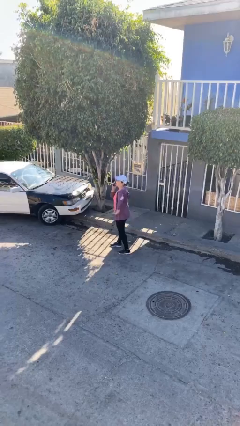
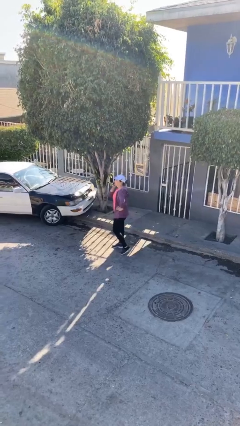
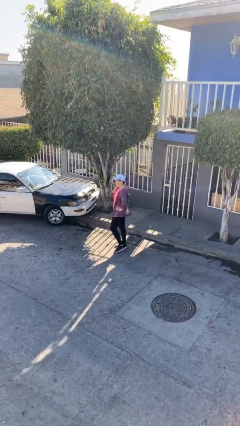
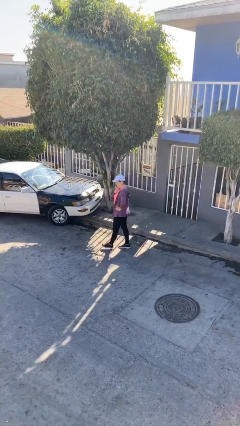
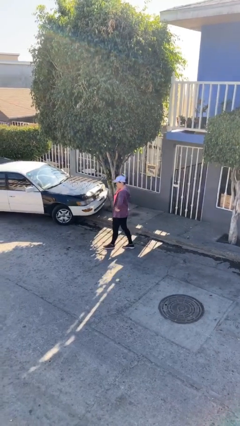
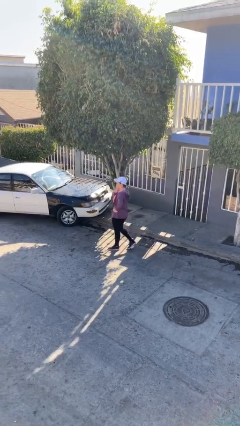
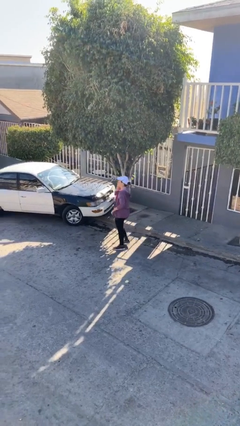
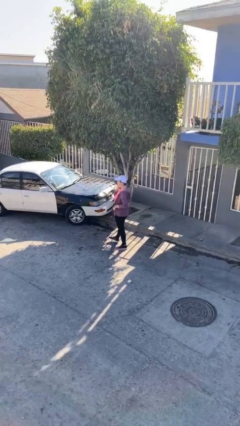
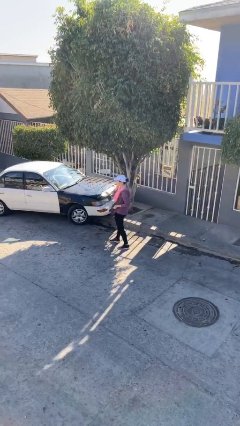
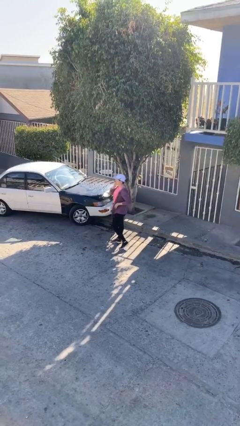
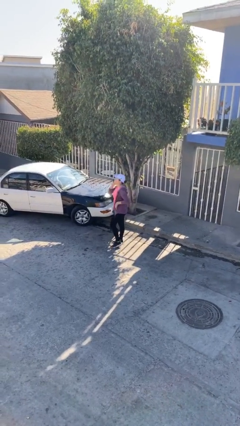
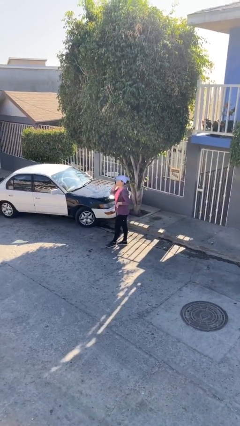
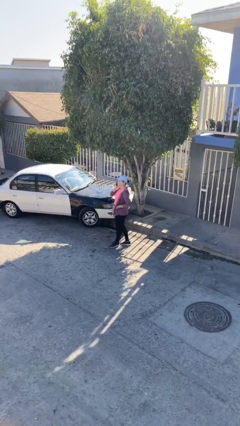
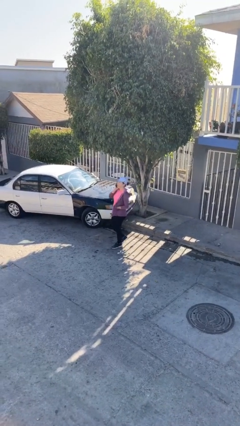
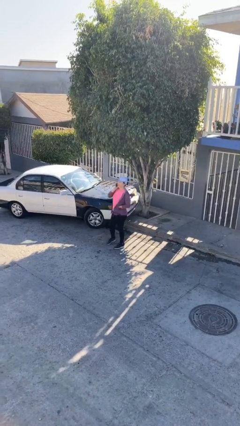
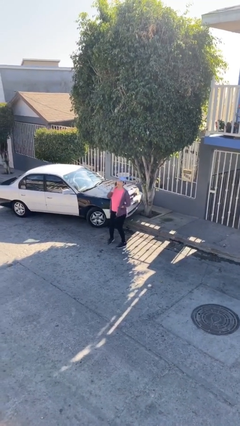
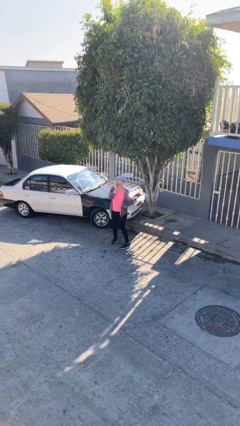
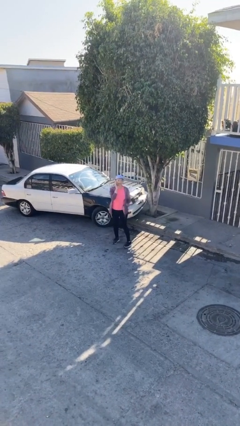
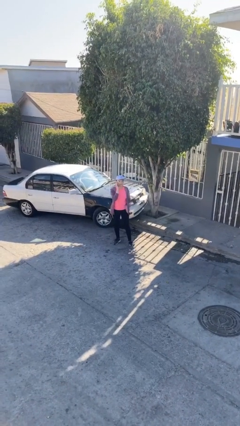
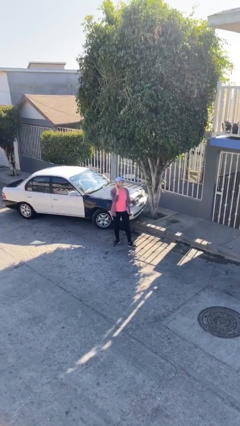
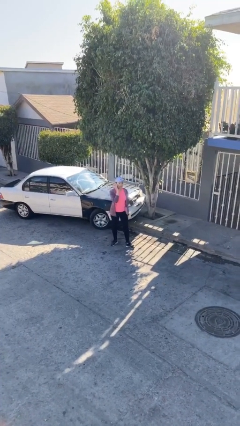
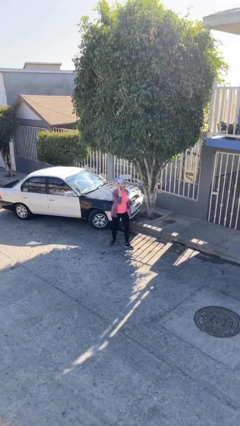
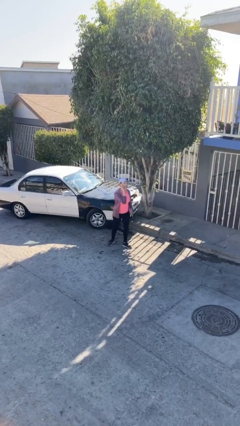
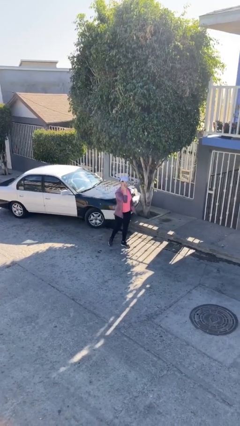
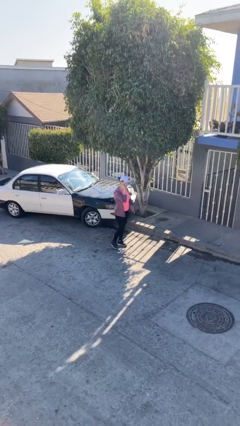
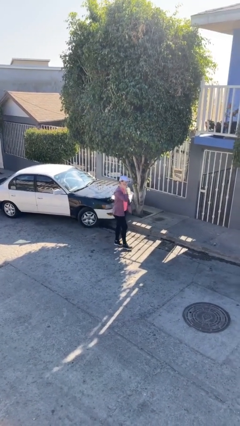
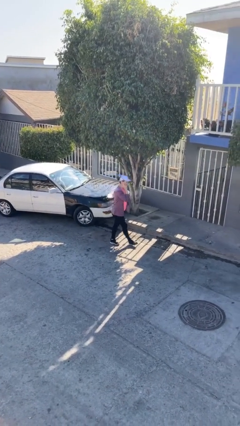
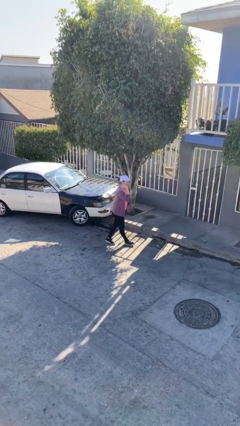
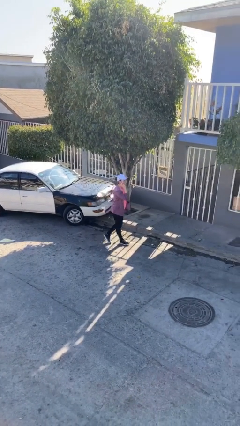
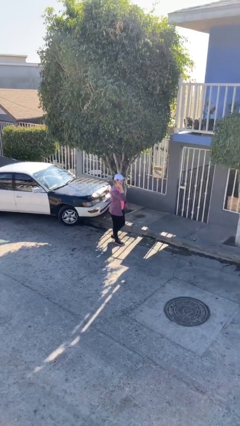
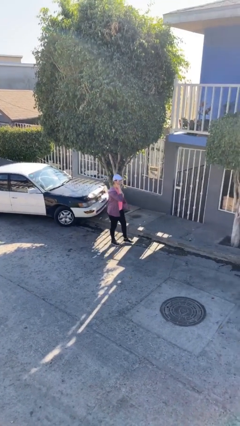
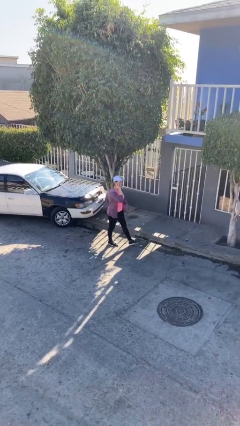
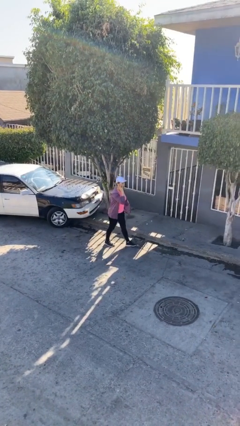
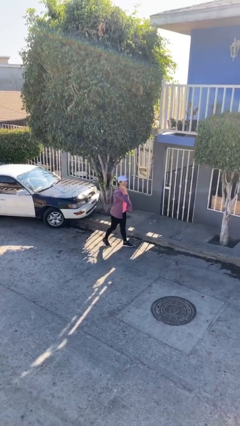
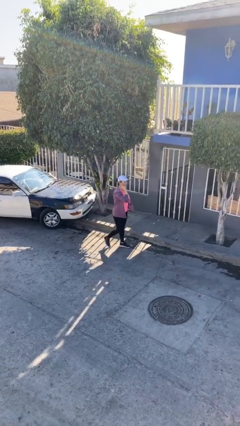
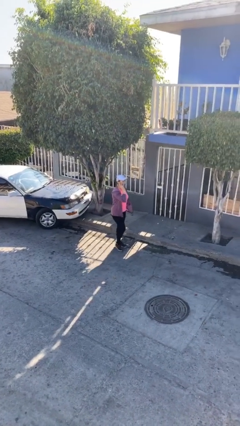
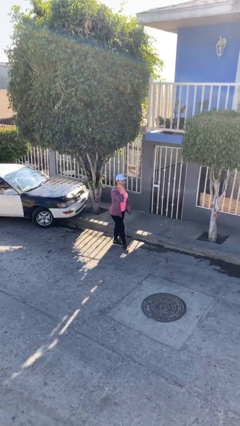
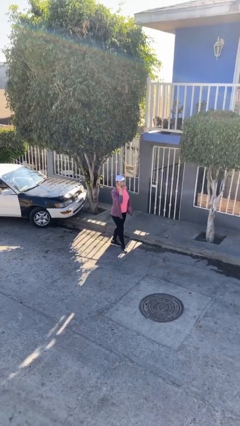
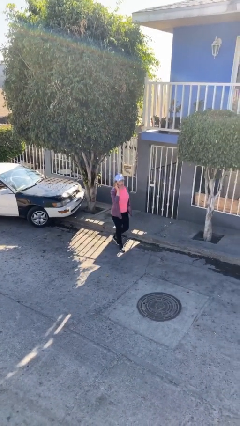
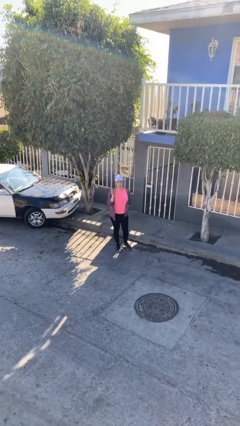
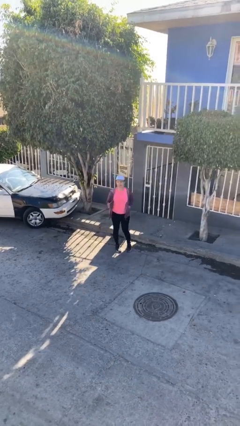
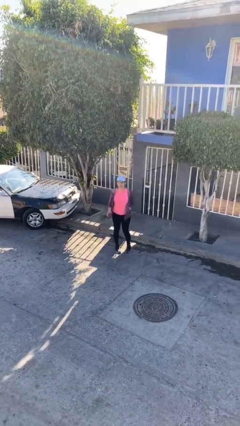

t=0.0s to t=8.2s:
person talks on phone

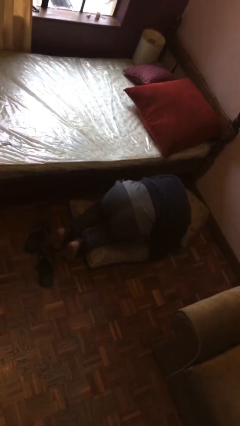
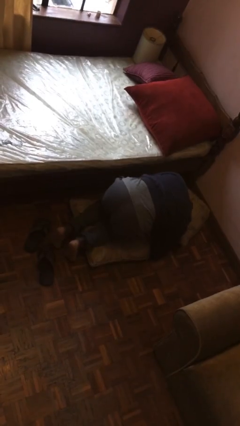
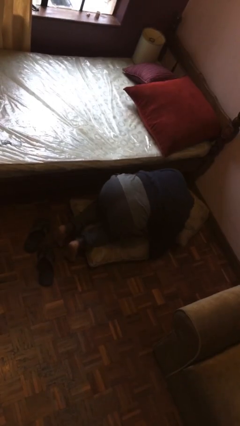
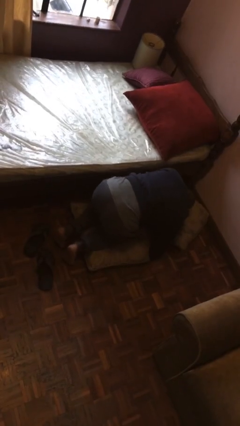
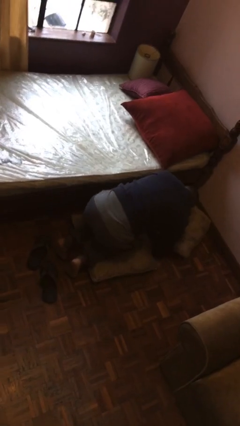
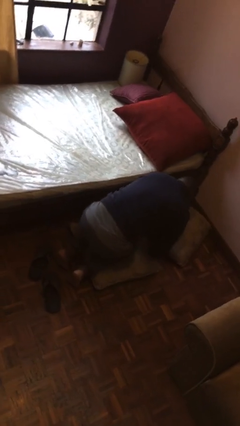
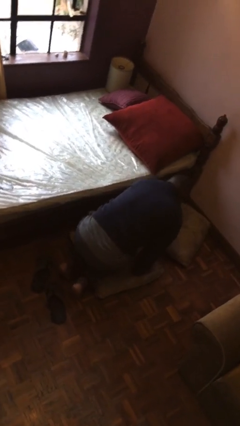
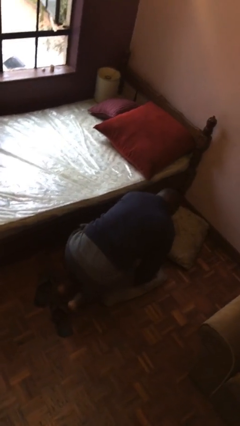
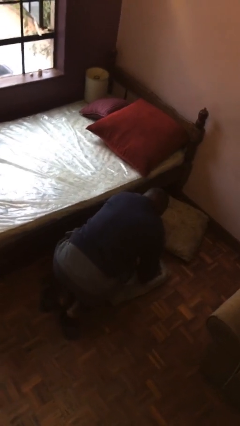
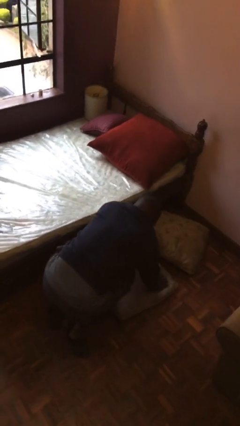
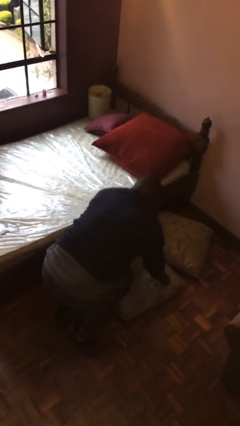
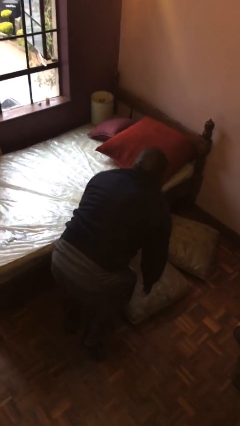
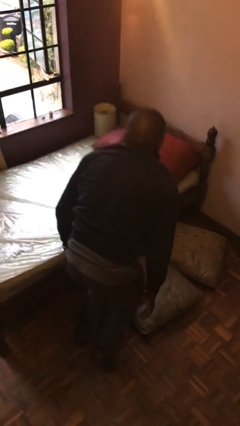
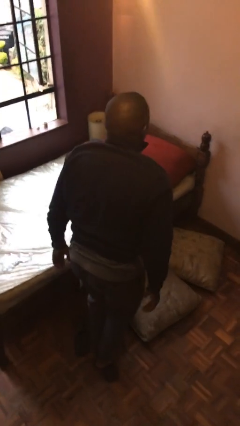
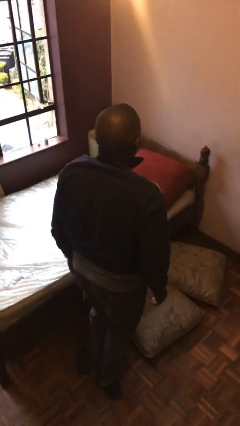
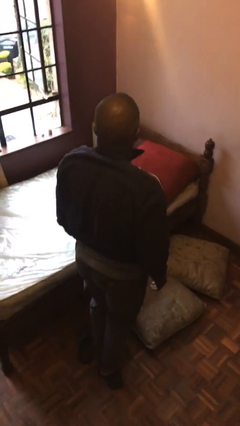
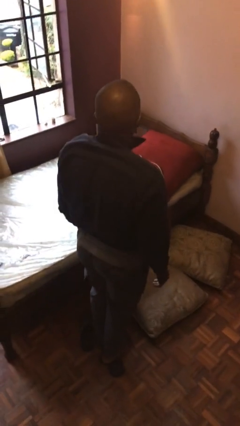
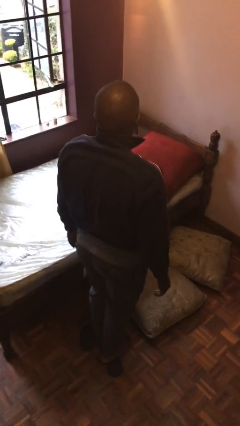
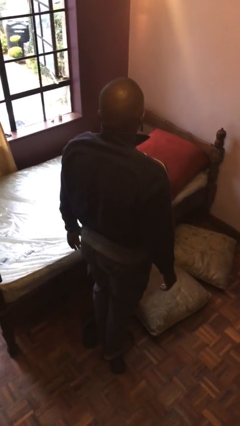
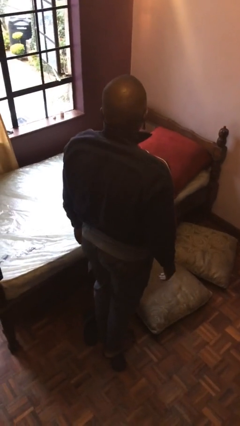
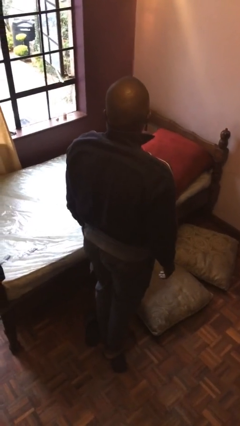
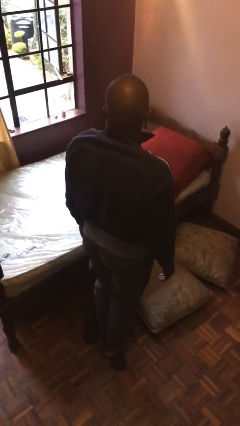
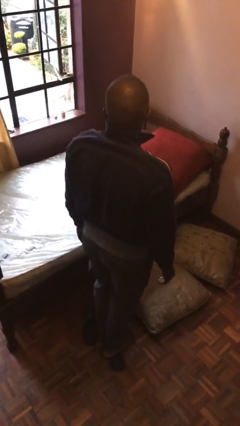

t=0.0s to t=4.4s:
person stands up from floor

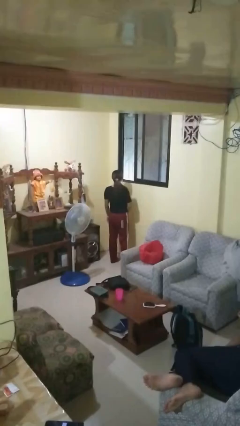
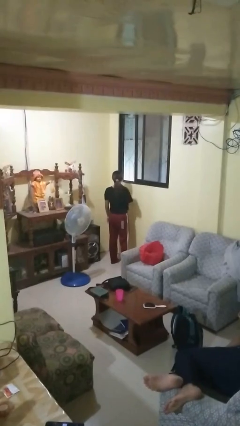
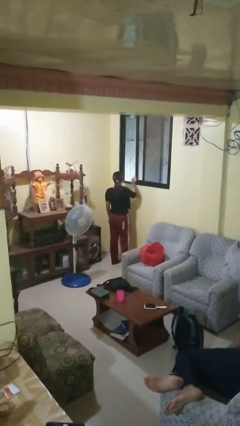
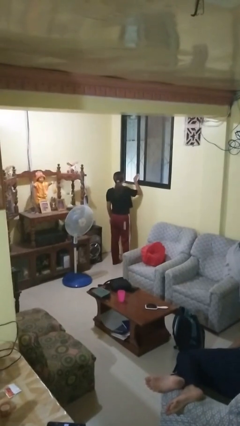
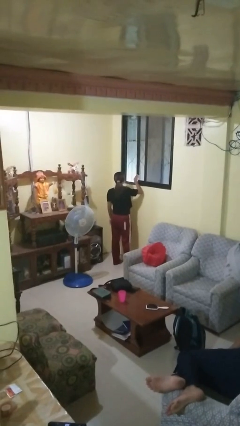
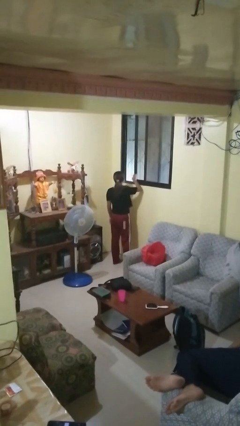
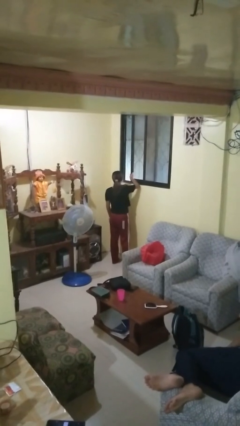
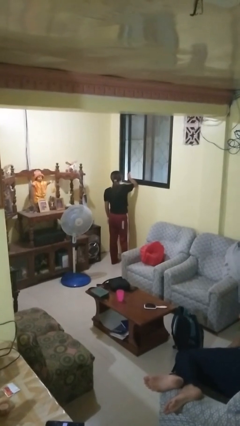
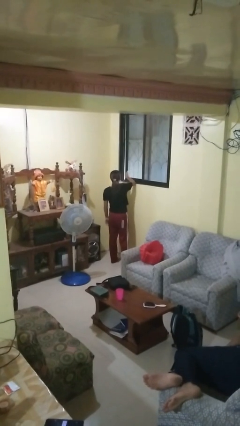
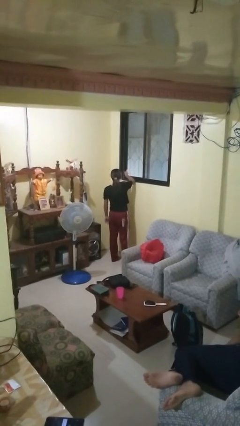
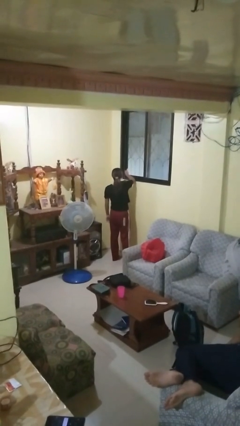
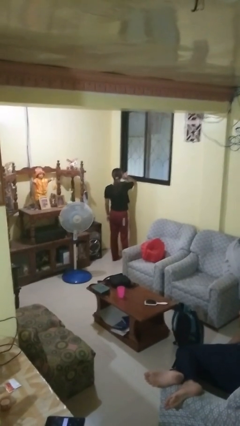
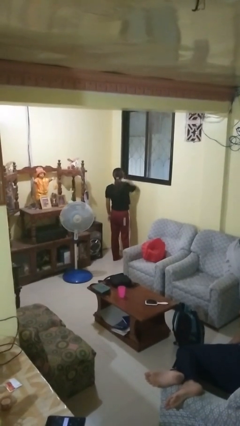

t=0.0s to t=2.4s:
person closes home window

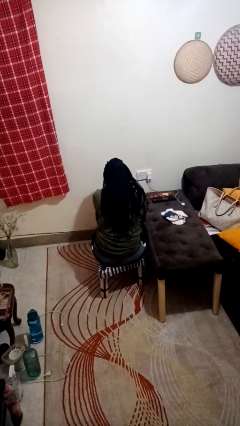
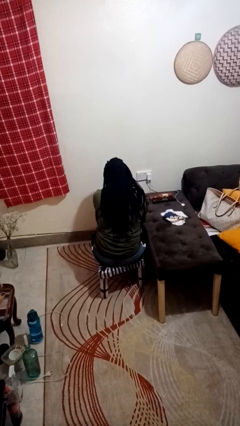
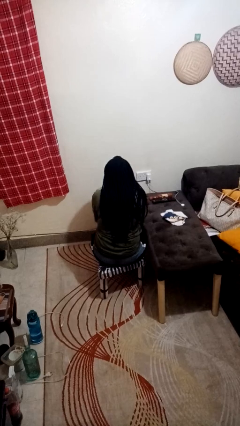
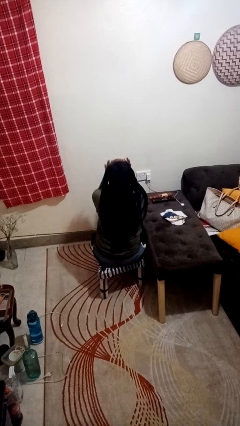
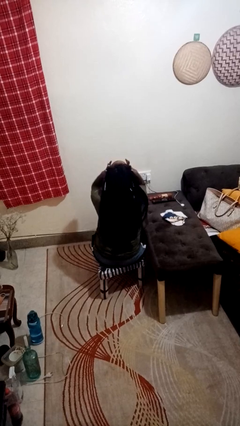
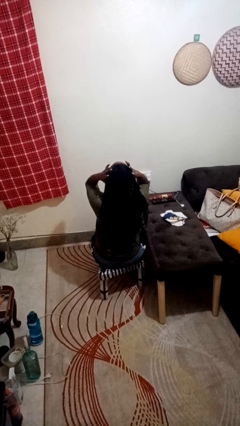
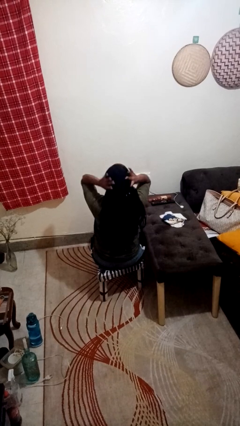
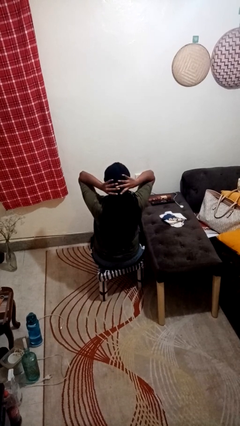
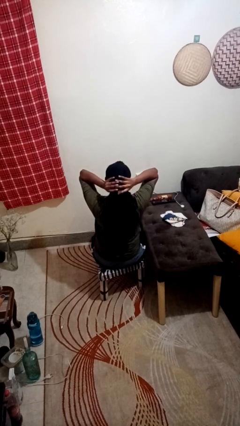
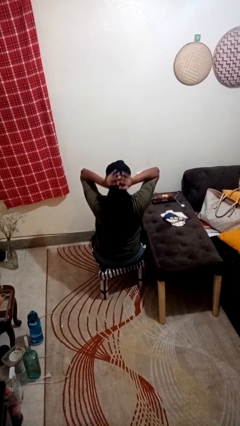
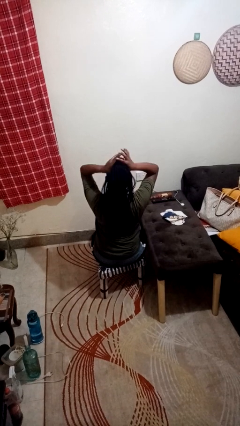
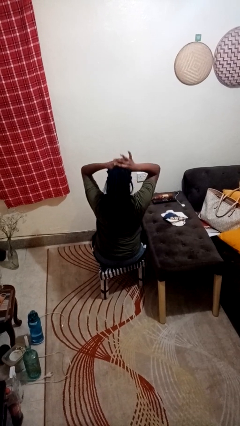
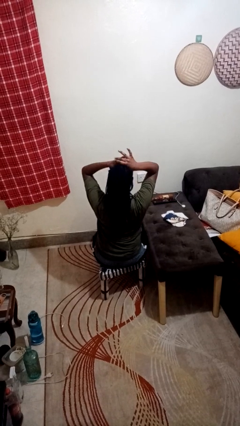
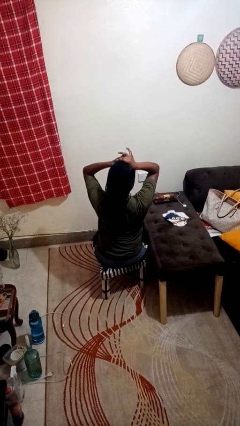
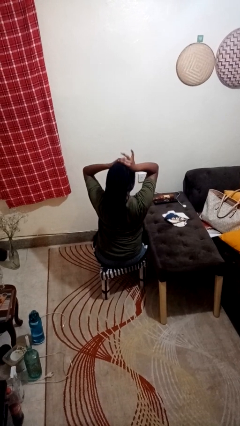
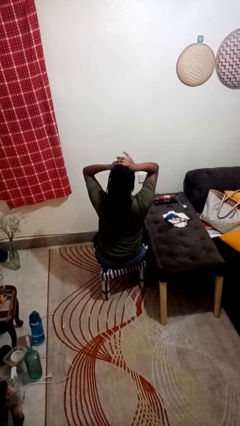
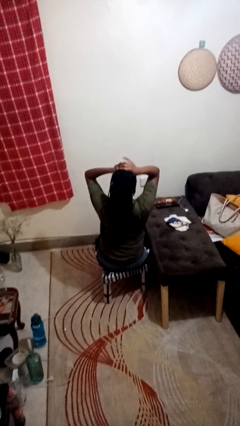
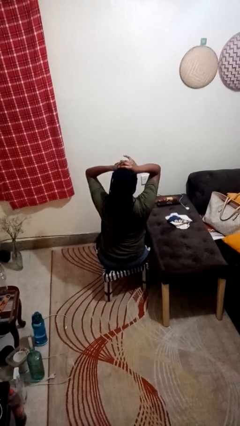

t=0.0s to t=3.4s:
person puts hair in ponytail

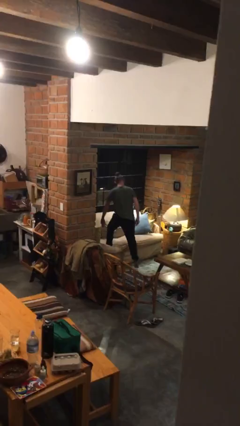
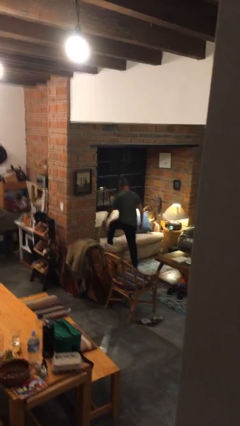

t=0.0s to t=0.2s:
person climbs off couch
